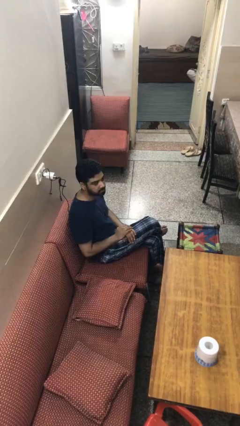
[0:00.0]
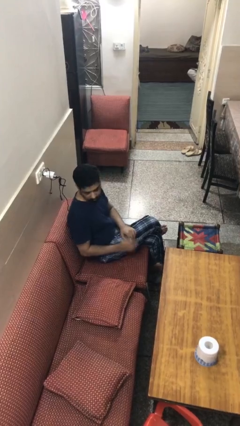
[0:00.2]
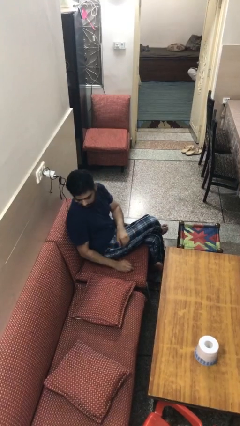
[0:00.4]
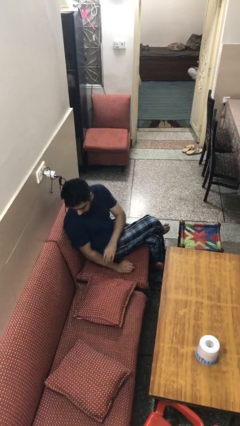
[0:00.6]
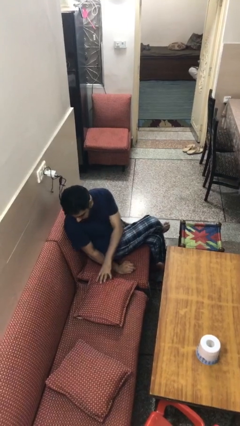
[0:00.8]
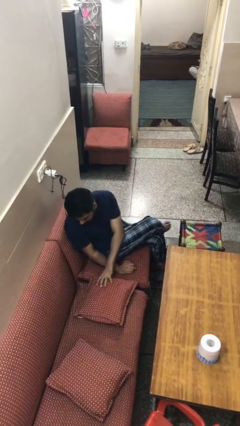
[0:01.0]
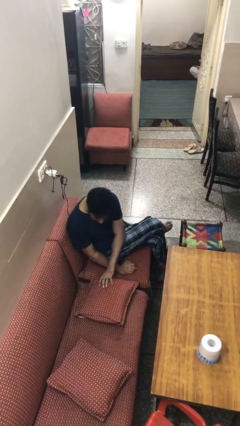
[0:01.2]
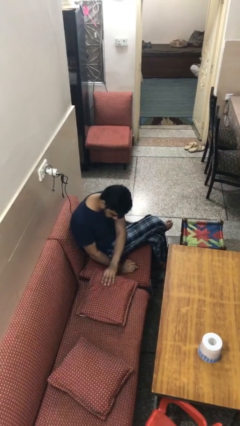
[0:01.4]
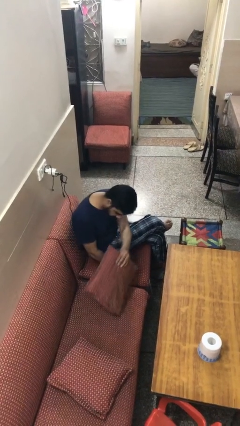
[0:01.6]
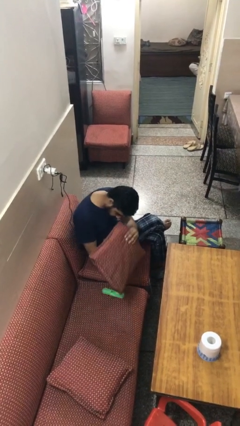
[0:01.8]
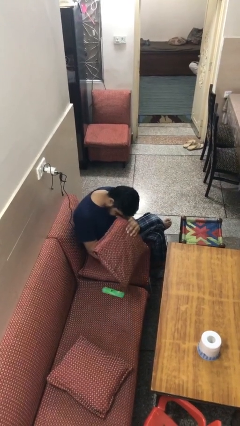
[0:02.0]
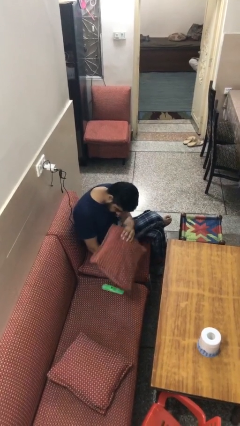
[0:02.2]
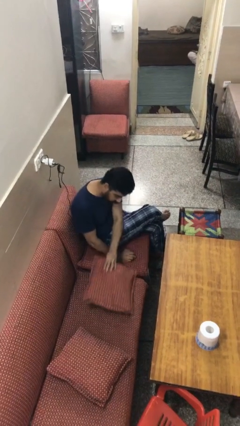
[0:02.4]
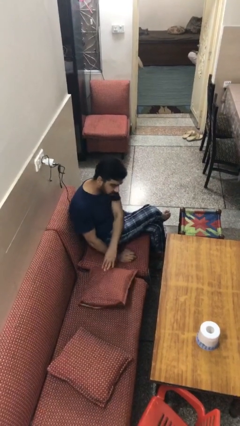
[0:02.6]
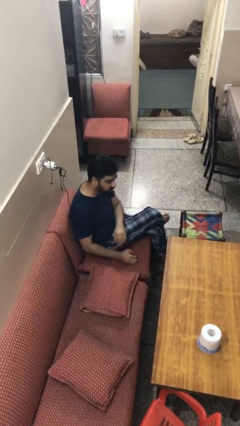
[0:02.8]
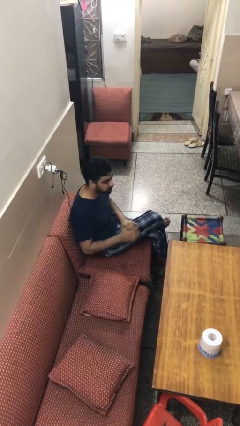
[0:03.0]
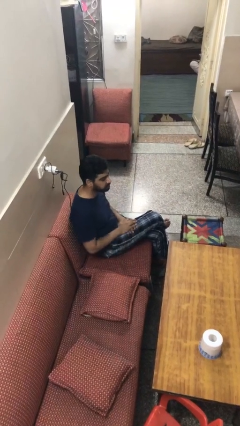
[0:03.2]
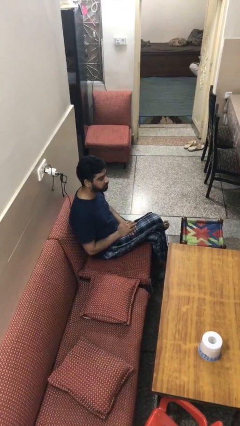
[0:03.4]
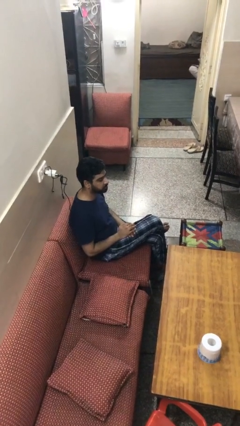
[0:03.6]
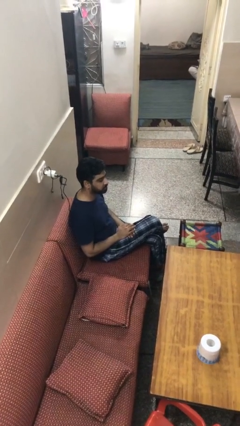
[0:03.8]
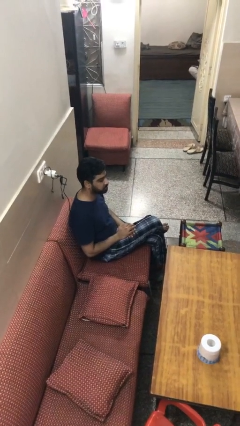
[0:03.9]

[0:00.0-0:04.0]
person searches in couch

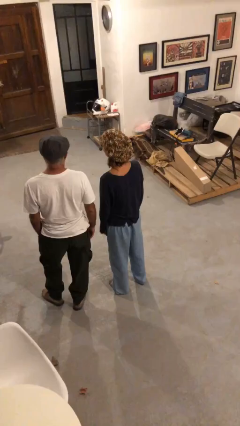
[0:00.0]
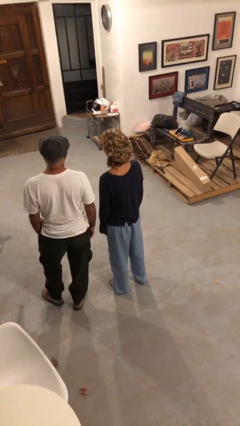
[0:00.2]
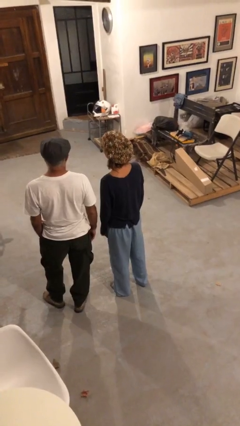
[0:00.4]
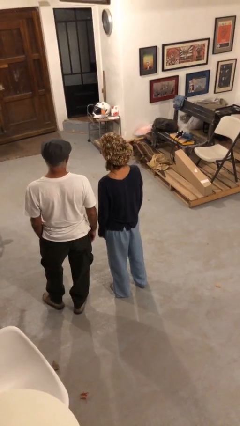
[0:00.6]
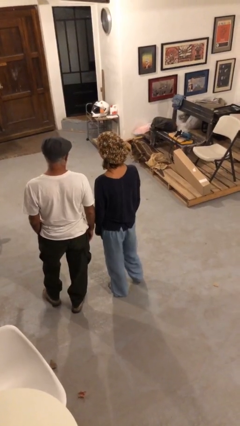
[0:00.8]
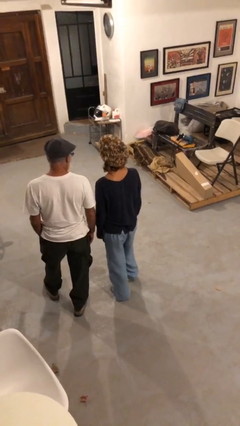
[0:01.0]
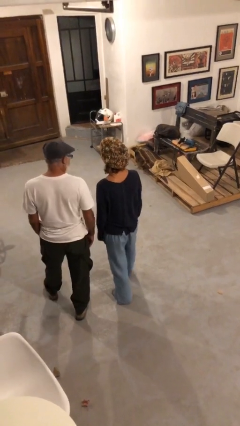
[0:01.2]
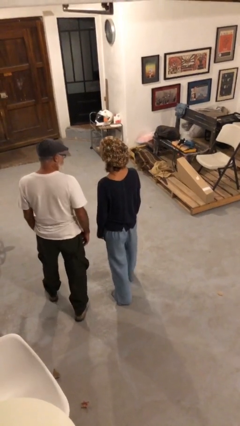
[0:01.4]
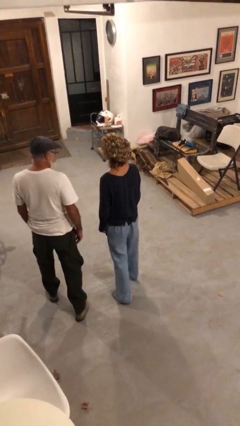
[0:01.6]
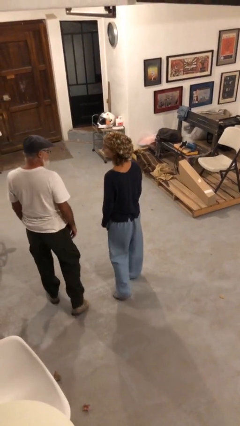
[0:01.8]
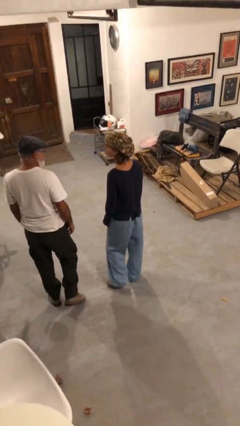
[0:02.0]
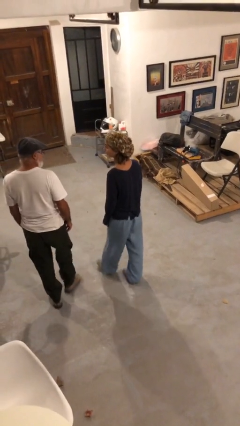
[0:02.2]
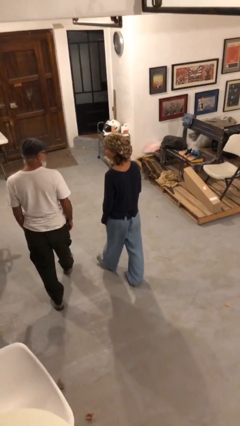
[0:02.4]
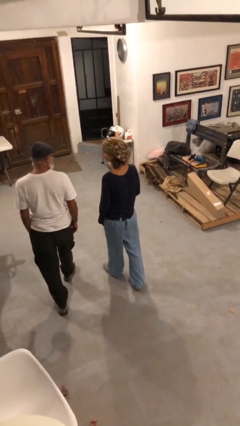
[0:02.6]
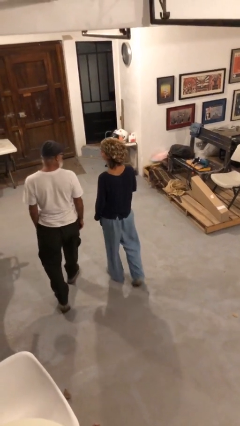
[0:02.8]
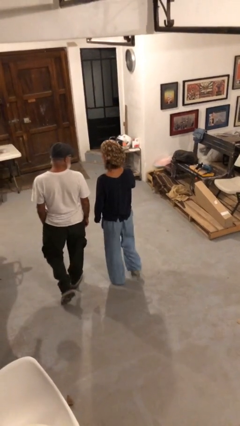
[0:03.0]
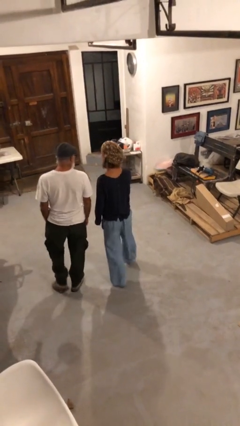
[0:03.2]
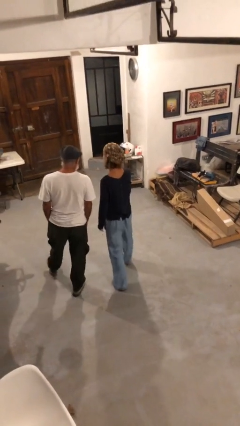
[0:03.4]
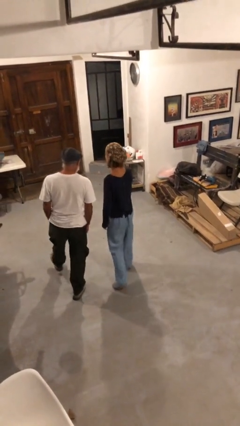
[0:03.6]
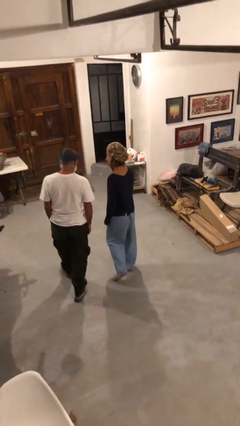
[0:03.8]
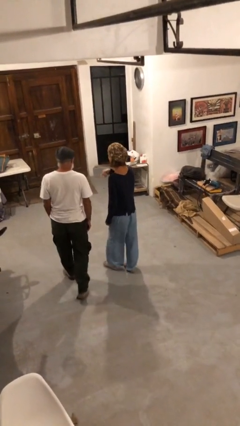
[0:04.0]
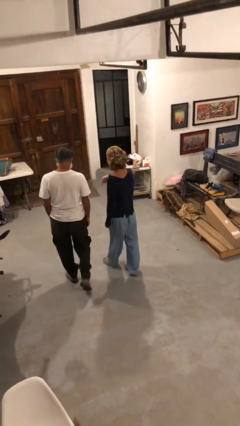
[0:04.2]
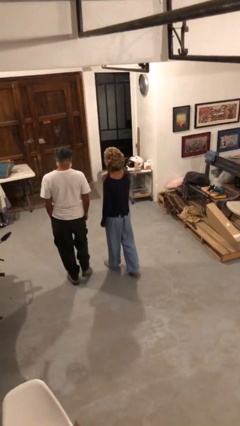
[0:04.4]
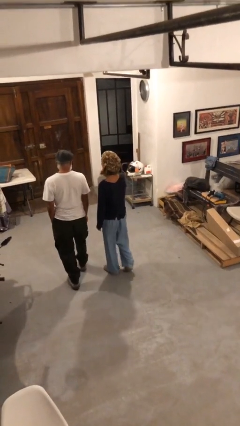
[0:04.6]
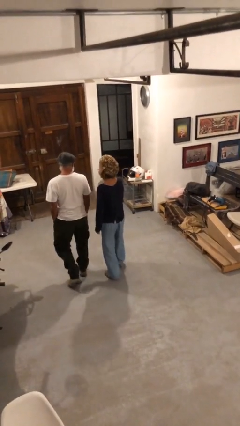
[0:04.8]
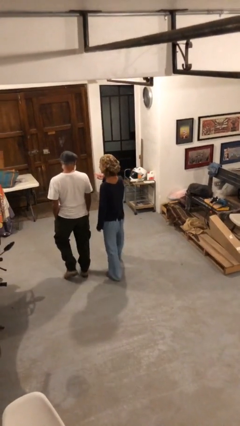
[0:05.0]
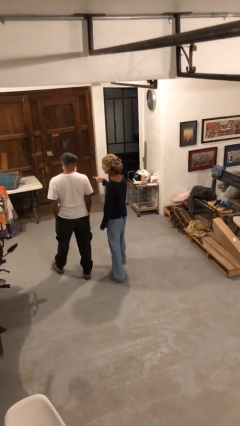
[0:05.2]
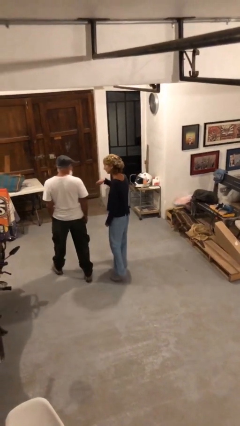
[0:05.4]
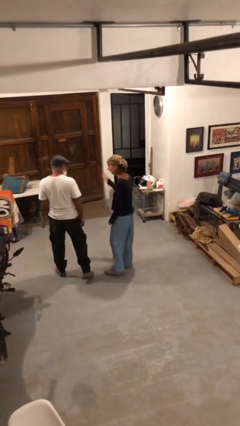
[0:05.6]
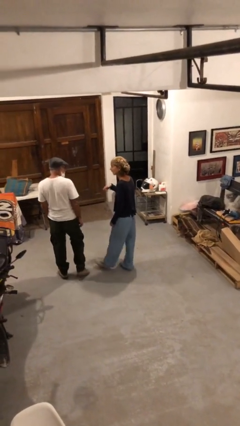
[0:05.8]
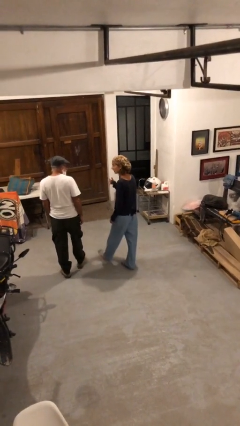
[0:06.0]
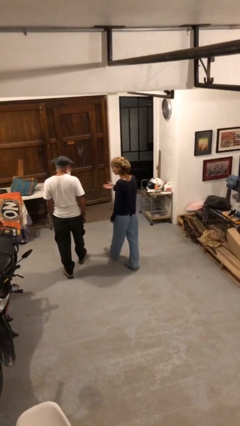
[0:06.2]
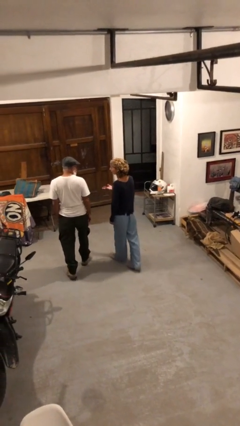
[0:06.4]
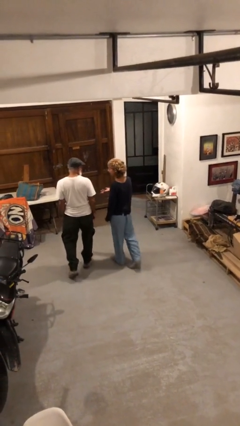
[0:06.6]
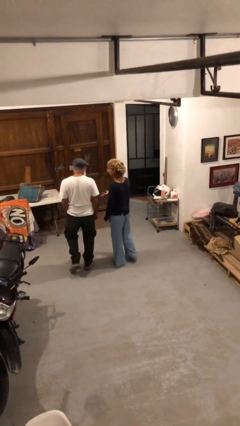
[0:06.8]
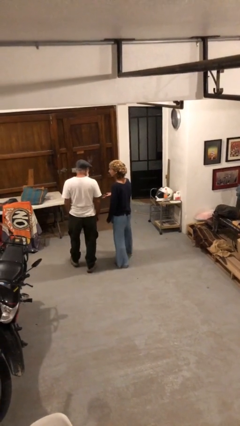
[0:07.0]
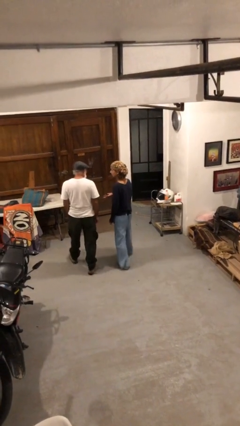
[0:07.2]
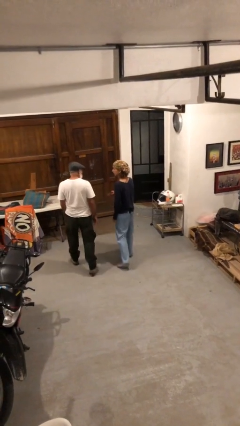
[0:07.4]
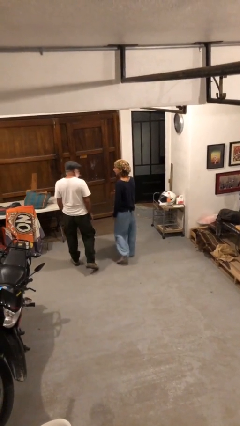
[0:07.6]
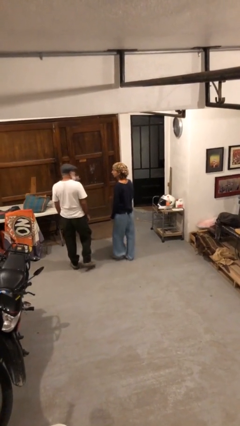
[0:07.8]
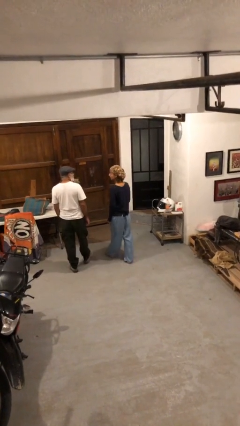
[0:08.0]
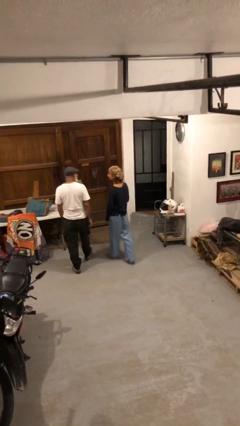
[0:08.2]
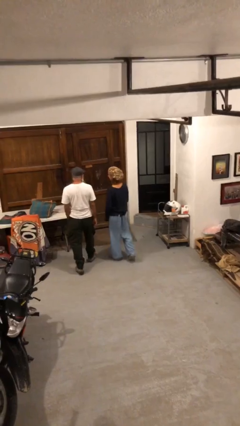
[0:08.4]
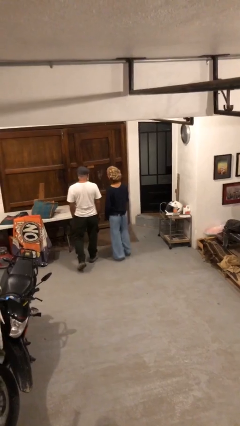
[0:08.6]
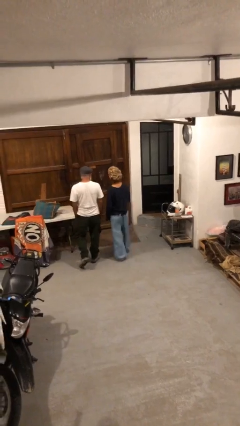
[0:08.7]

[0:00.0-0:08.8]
person talks to person

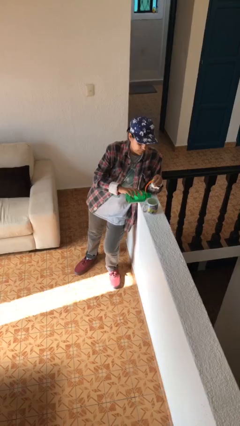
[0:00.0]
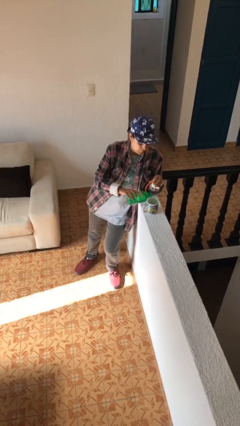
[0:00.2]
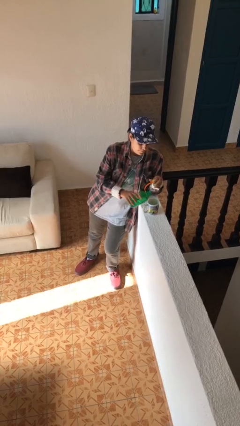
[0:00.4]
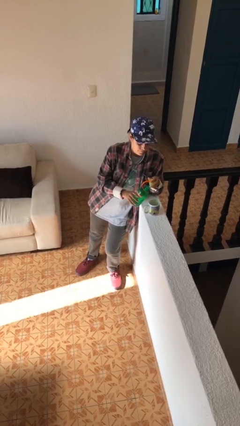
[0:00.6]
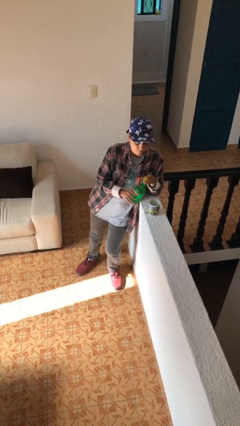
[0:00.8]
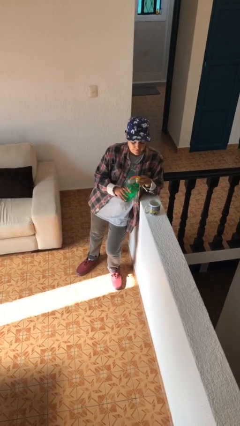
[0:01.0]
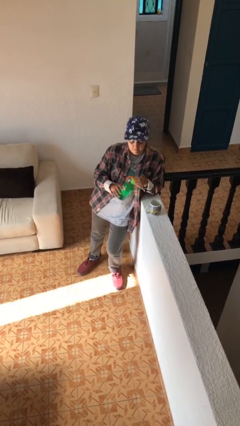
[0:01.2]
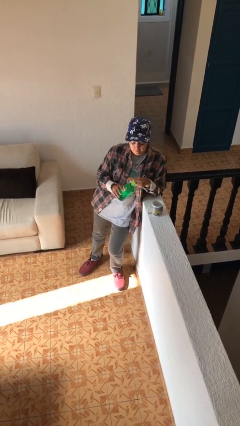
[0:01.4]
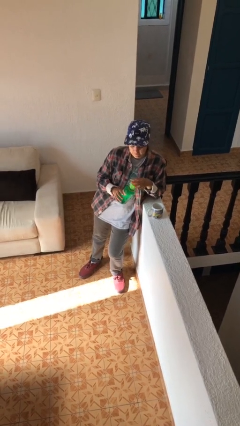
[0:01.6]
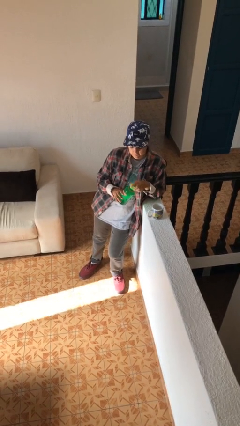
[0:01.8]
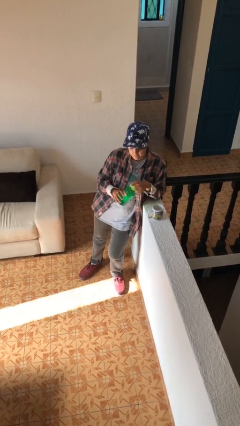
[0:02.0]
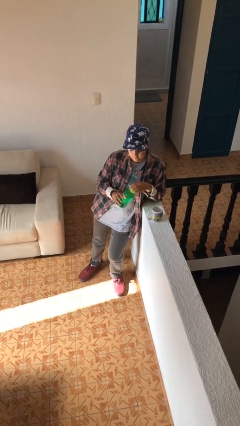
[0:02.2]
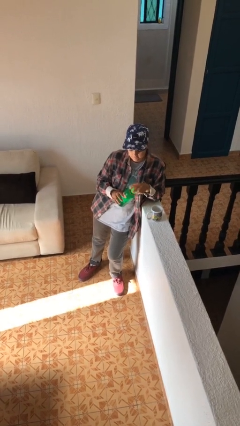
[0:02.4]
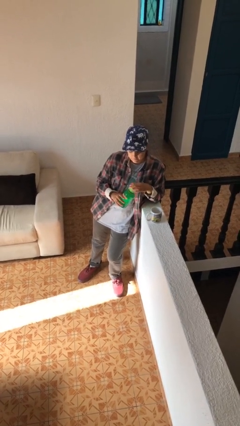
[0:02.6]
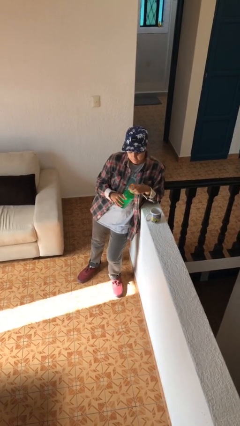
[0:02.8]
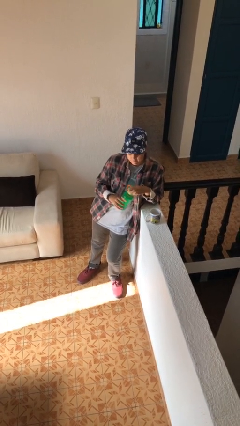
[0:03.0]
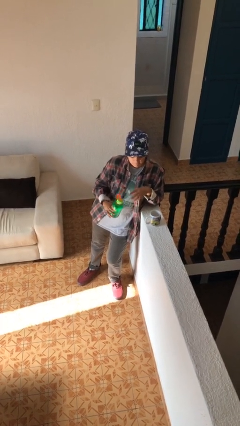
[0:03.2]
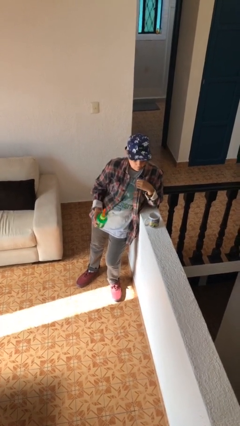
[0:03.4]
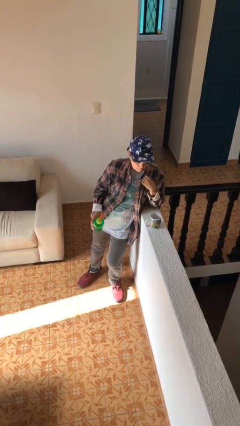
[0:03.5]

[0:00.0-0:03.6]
person screws lid to bottle

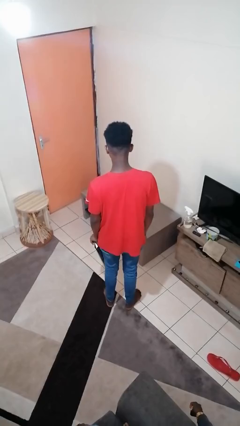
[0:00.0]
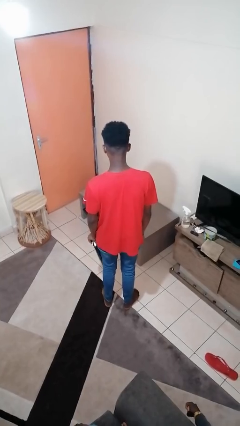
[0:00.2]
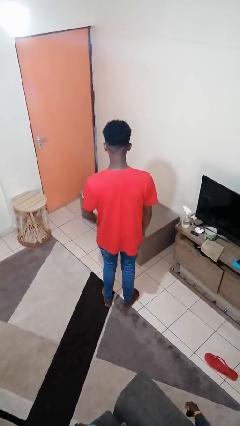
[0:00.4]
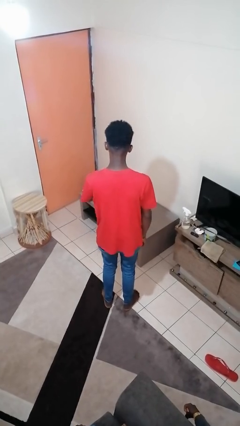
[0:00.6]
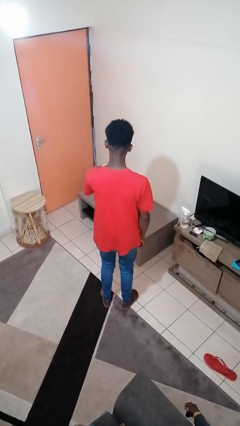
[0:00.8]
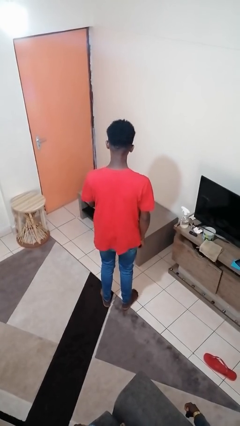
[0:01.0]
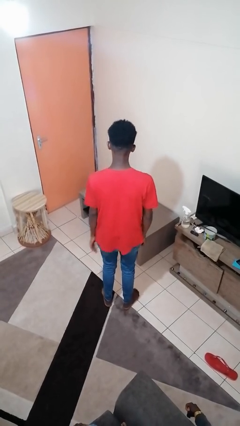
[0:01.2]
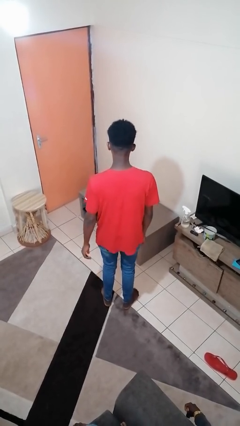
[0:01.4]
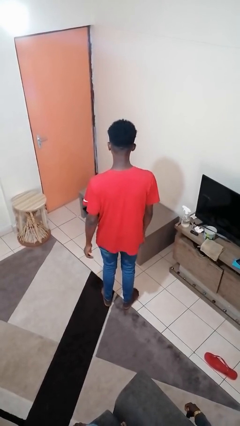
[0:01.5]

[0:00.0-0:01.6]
person throws object on table
